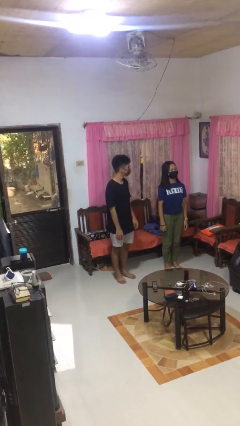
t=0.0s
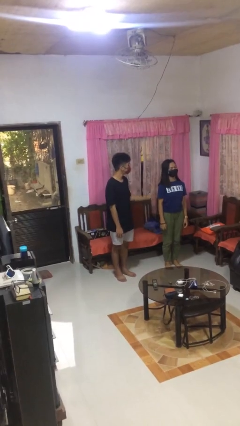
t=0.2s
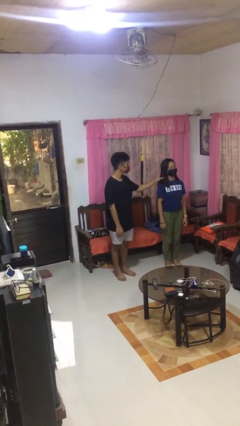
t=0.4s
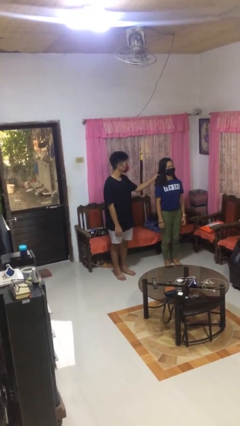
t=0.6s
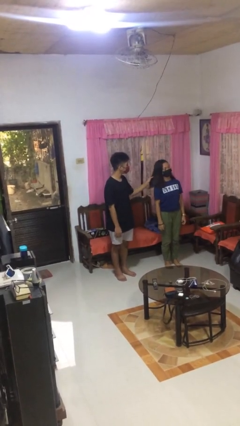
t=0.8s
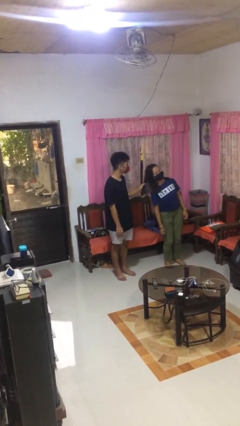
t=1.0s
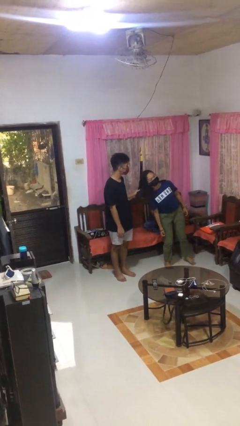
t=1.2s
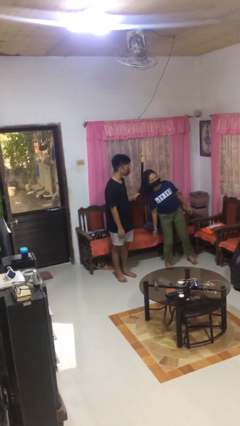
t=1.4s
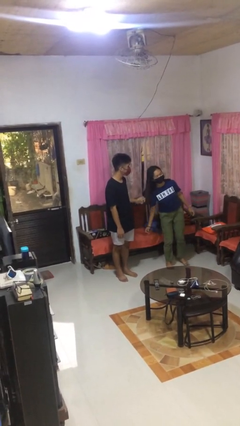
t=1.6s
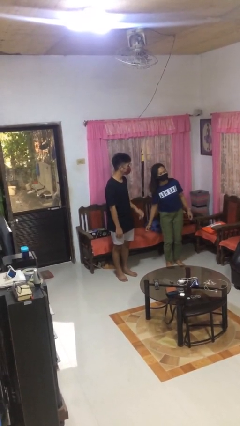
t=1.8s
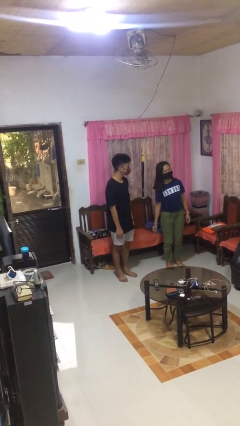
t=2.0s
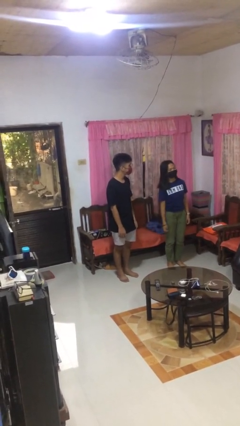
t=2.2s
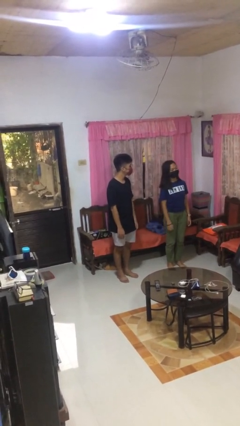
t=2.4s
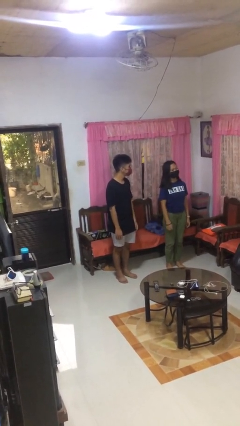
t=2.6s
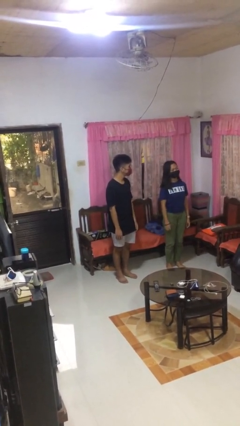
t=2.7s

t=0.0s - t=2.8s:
person grabs person by hair

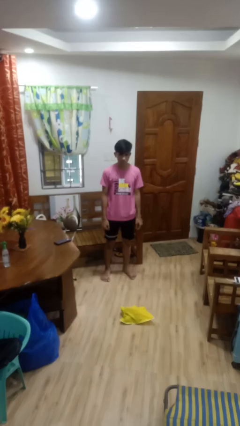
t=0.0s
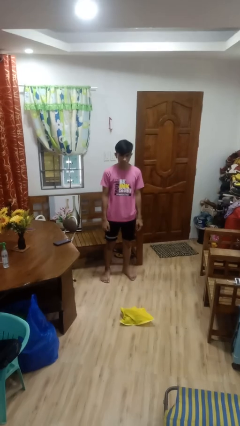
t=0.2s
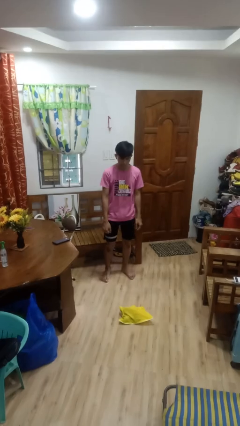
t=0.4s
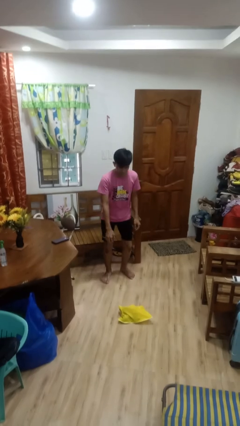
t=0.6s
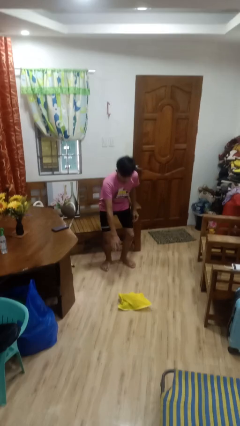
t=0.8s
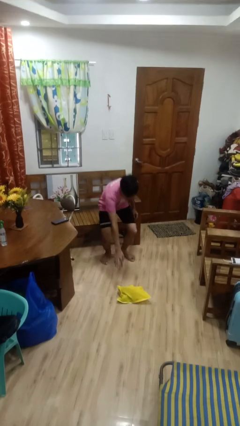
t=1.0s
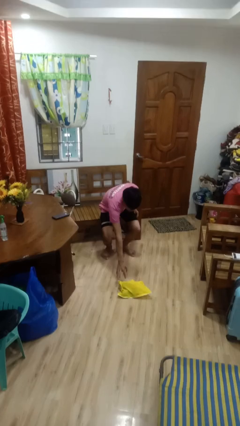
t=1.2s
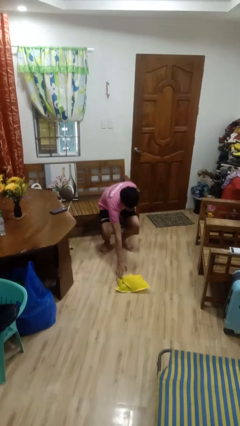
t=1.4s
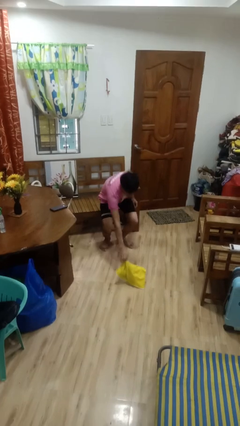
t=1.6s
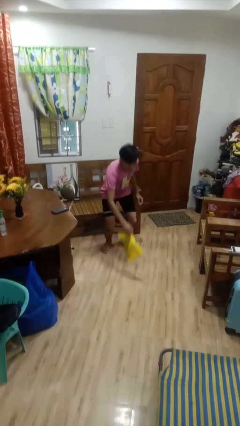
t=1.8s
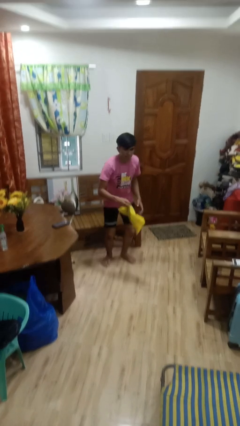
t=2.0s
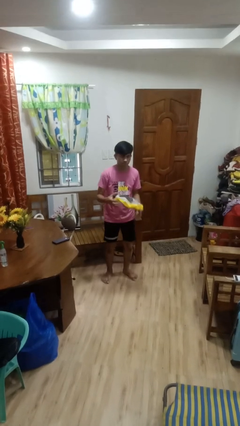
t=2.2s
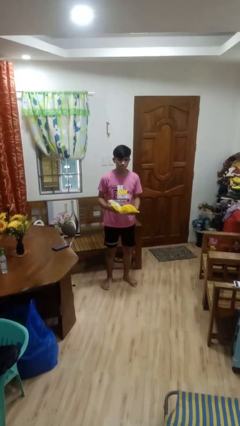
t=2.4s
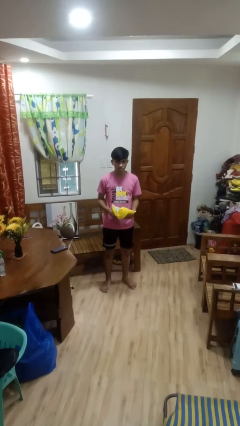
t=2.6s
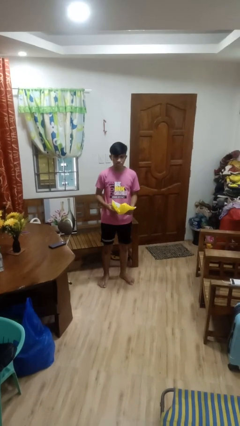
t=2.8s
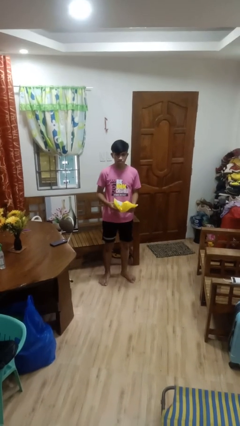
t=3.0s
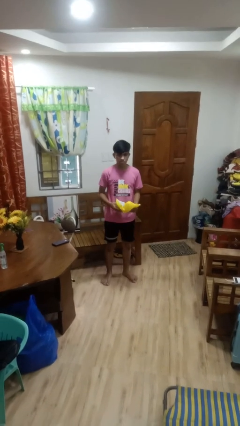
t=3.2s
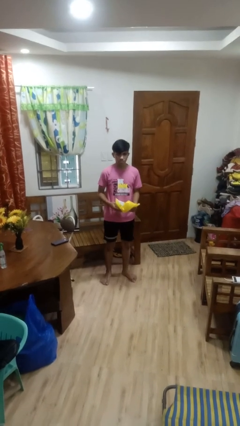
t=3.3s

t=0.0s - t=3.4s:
person picks up object from floor

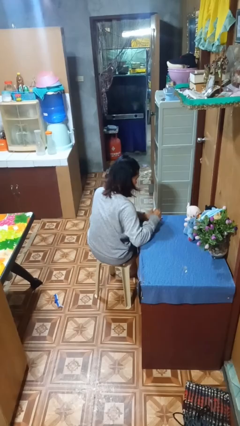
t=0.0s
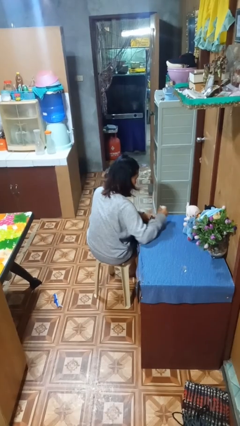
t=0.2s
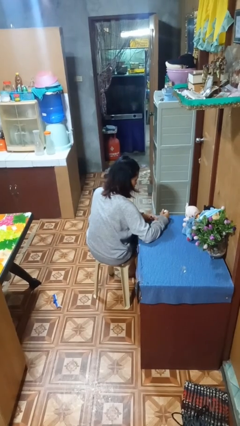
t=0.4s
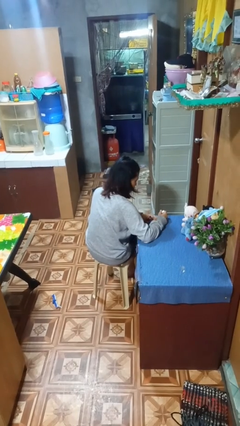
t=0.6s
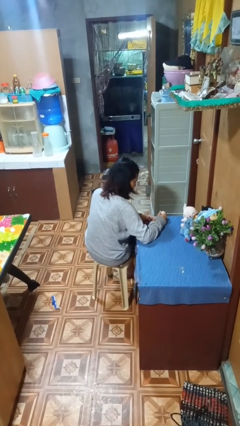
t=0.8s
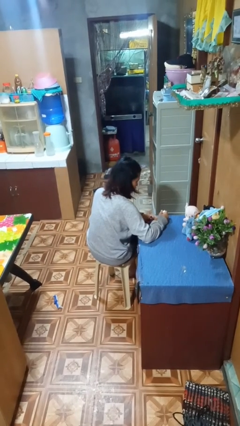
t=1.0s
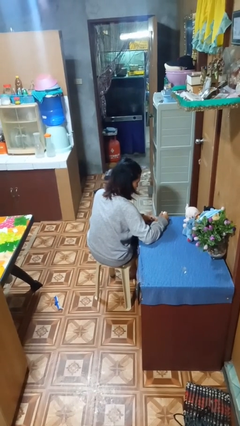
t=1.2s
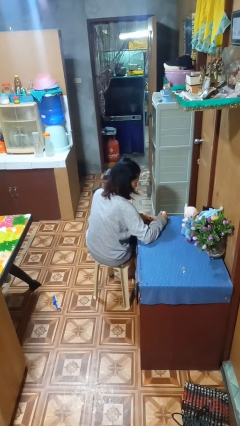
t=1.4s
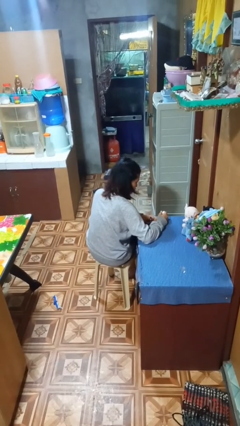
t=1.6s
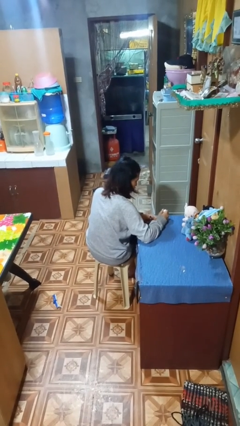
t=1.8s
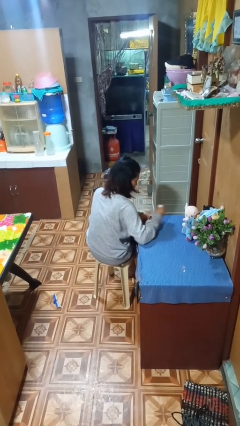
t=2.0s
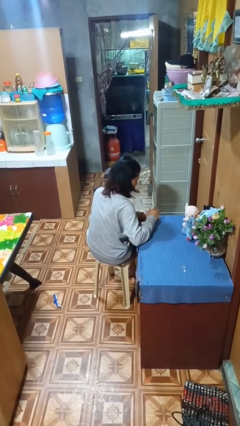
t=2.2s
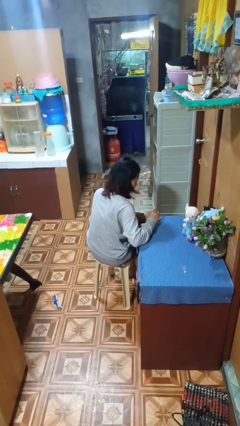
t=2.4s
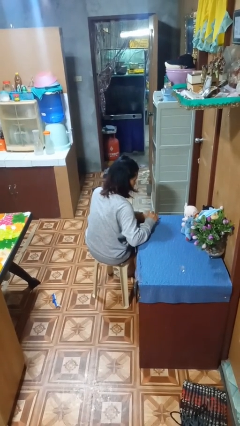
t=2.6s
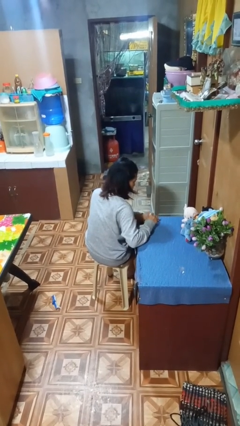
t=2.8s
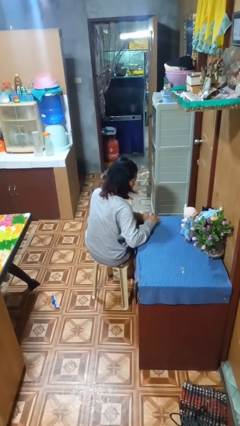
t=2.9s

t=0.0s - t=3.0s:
person paints fingernails

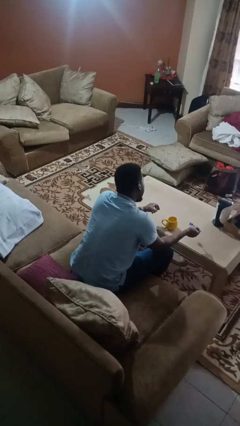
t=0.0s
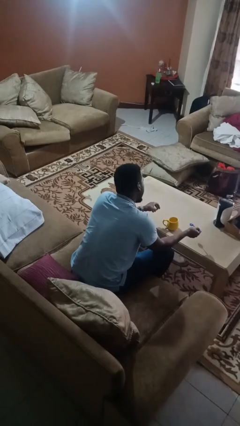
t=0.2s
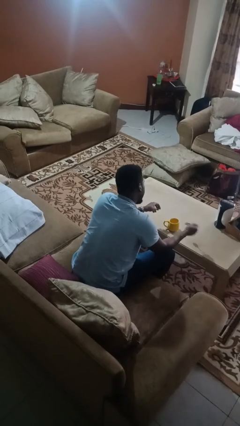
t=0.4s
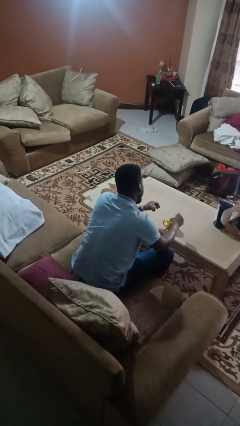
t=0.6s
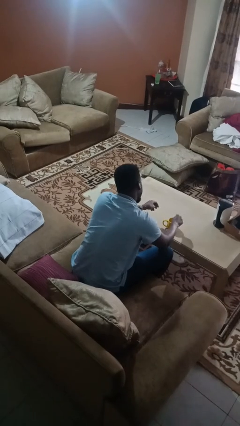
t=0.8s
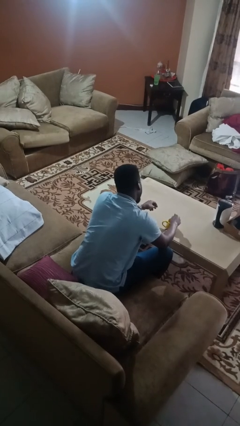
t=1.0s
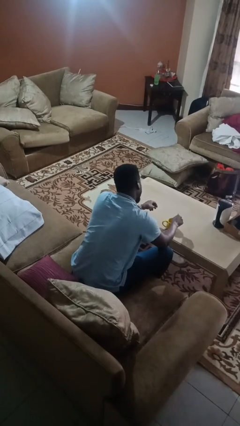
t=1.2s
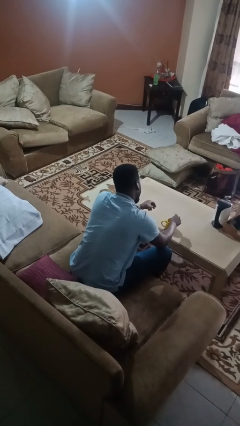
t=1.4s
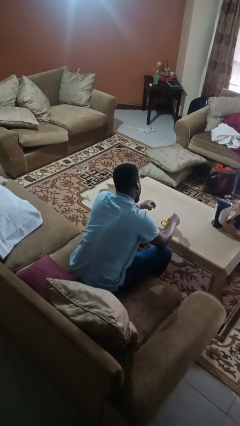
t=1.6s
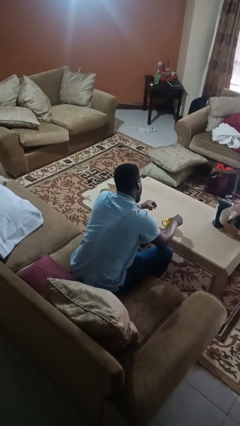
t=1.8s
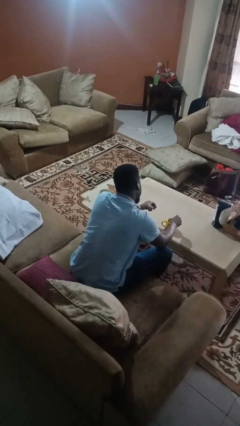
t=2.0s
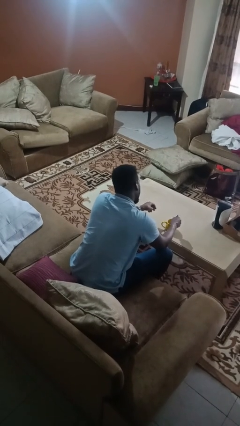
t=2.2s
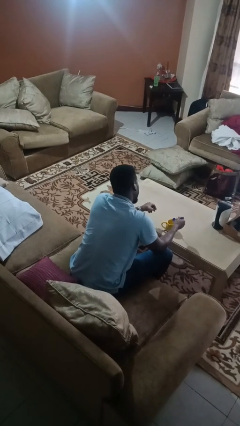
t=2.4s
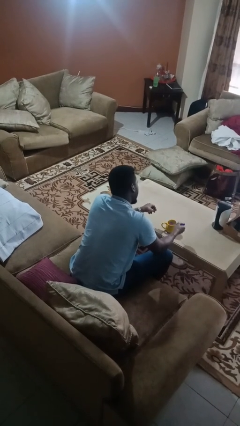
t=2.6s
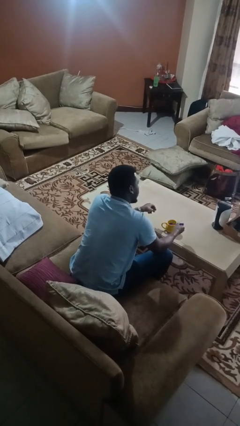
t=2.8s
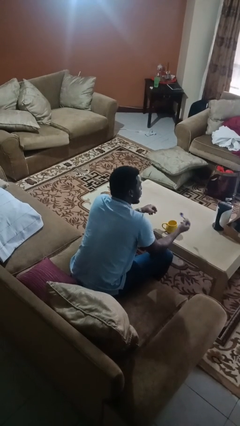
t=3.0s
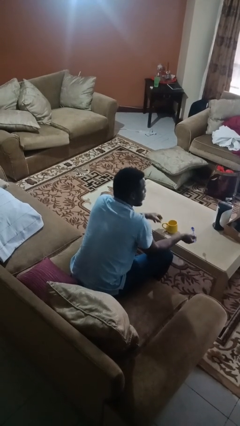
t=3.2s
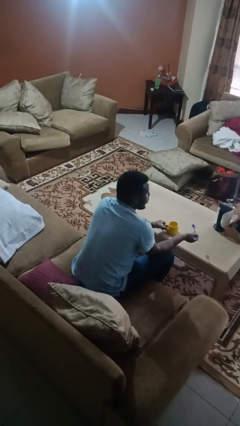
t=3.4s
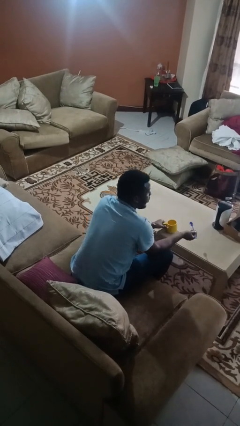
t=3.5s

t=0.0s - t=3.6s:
person stirs mug

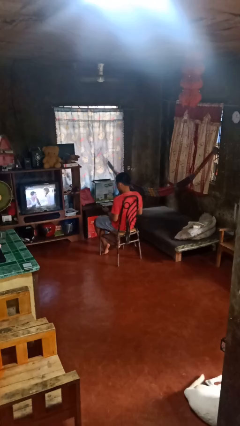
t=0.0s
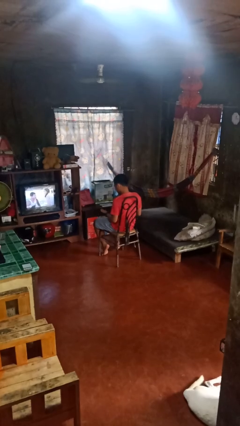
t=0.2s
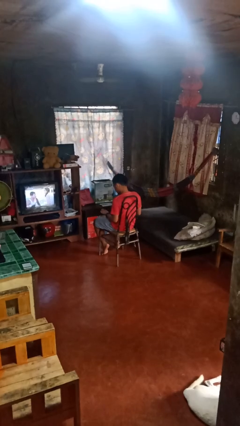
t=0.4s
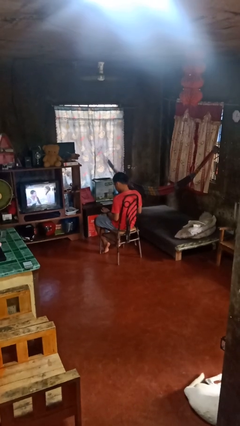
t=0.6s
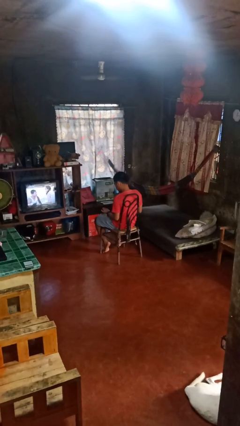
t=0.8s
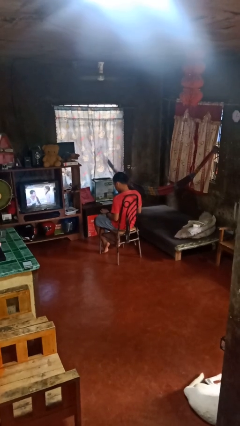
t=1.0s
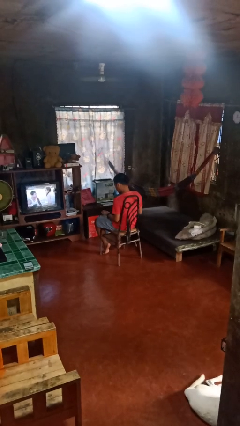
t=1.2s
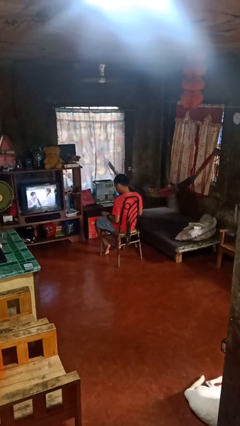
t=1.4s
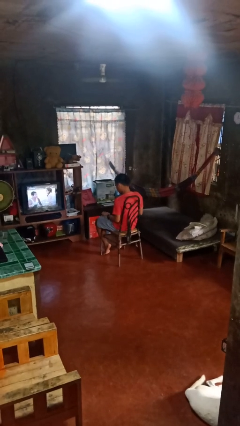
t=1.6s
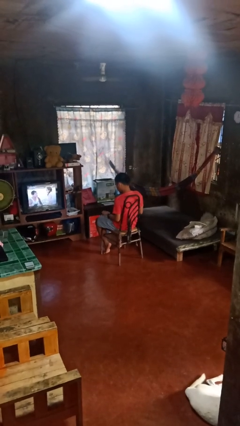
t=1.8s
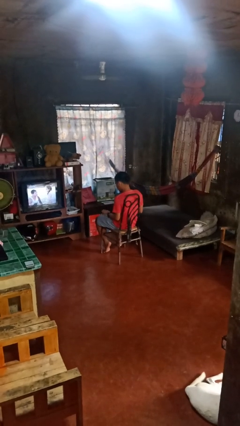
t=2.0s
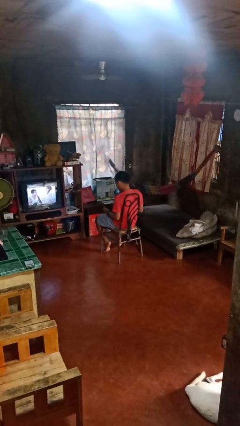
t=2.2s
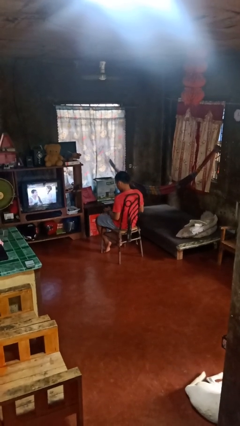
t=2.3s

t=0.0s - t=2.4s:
person looks at hands in lap

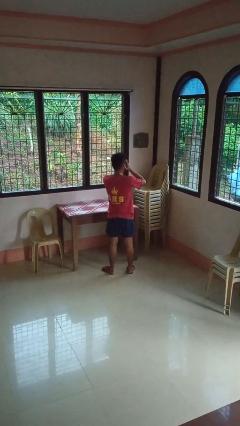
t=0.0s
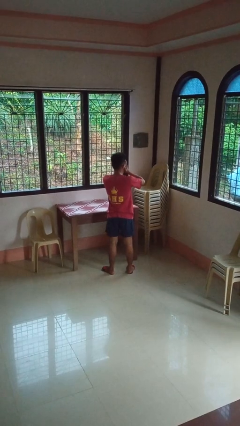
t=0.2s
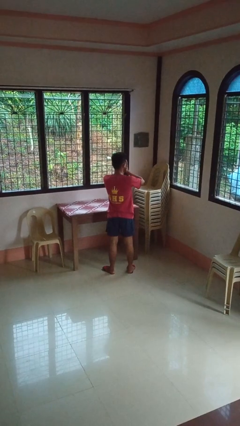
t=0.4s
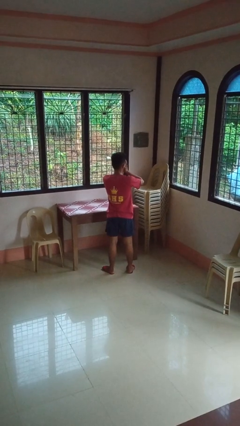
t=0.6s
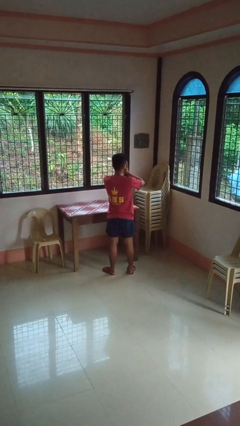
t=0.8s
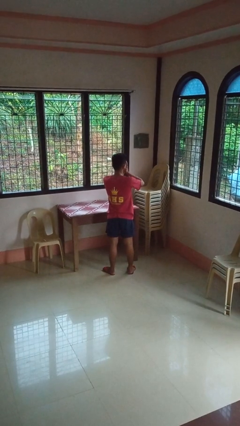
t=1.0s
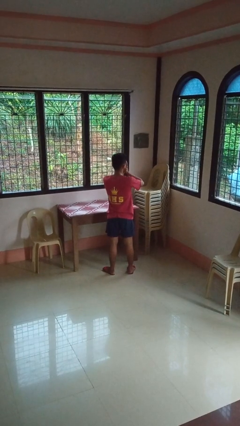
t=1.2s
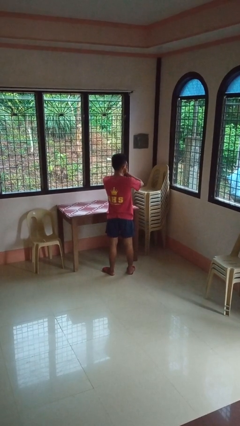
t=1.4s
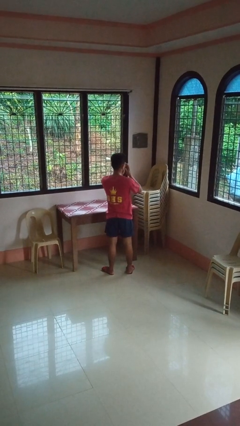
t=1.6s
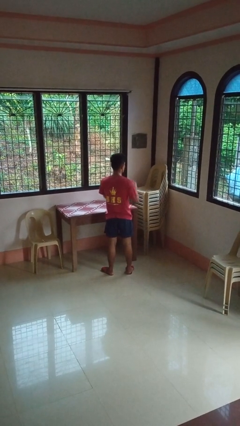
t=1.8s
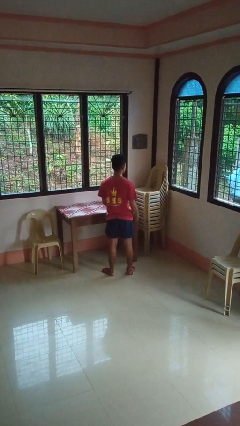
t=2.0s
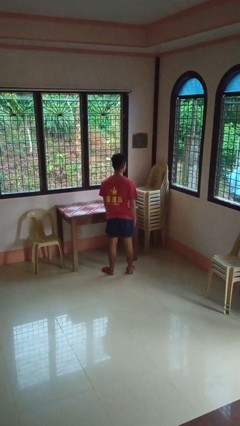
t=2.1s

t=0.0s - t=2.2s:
person covers face with hands

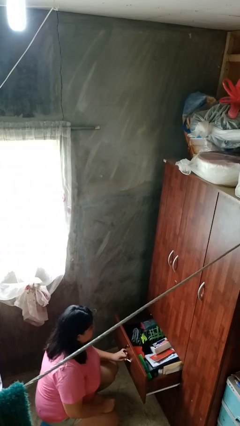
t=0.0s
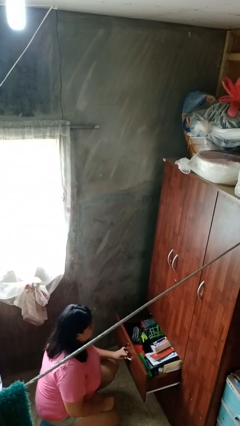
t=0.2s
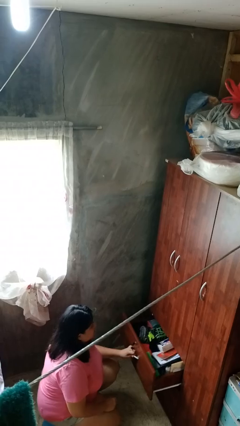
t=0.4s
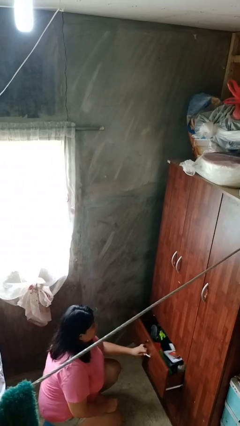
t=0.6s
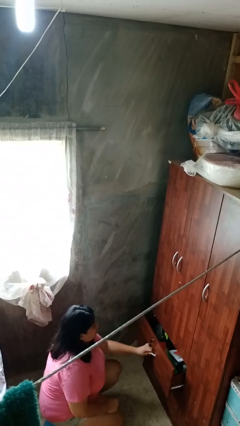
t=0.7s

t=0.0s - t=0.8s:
person closes dresser drawer
